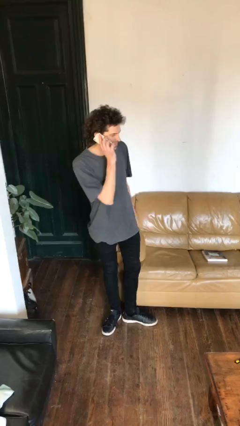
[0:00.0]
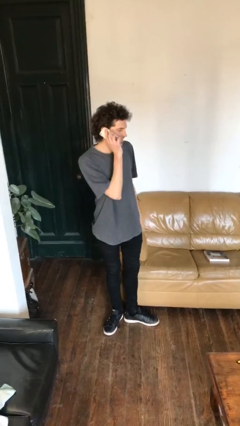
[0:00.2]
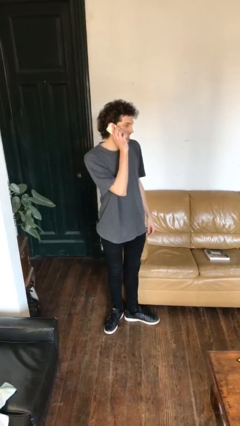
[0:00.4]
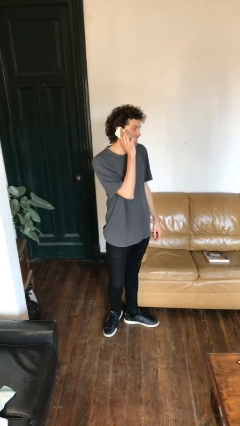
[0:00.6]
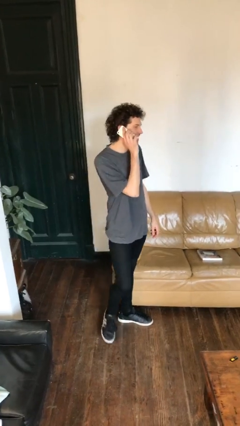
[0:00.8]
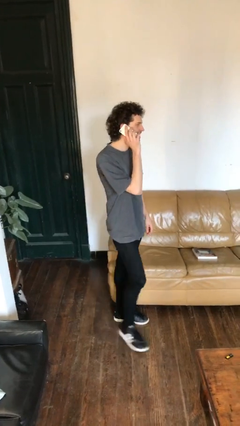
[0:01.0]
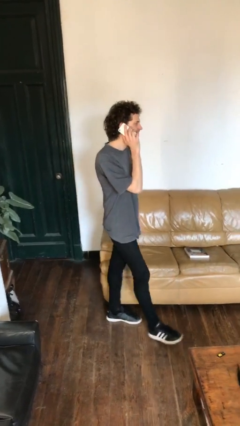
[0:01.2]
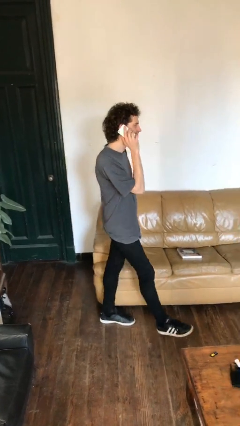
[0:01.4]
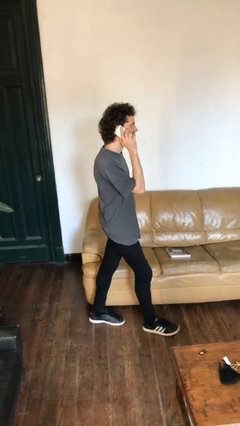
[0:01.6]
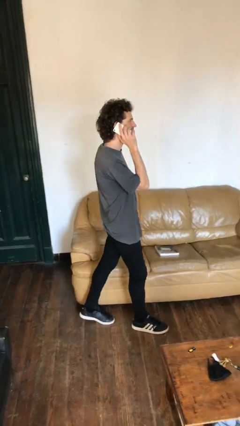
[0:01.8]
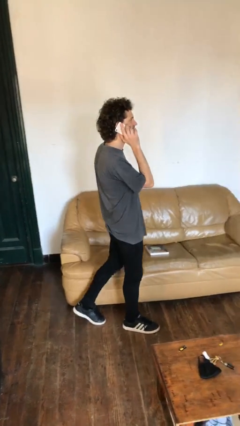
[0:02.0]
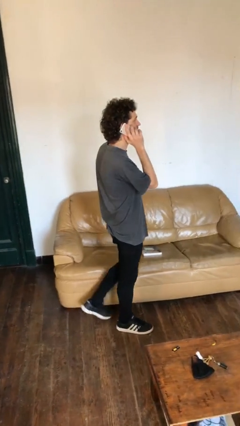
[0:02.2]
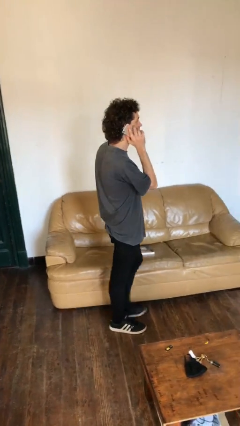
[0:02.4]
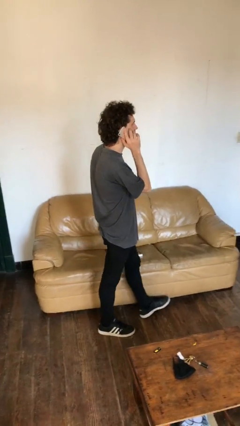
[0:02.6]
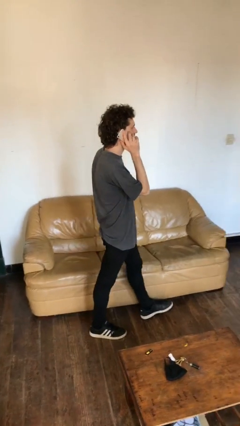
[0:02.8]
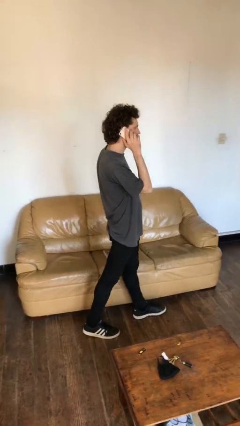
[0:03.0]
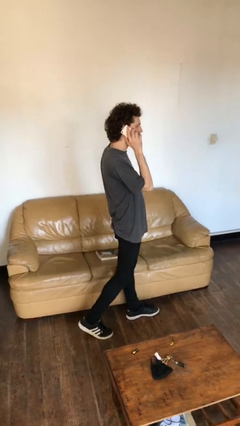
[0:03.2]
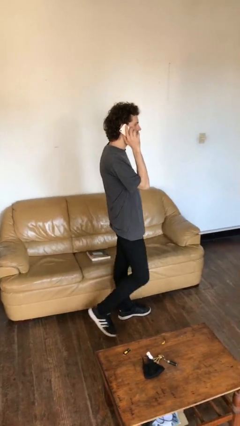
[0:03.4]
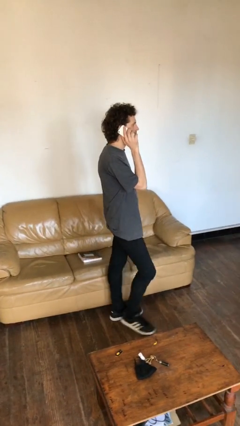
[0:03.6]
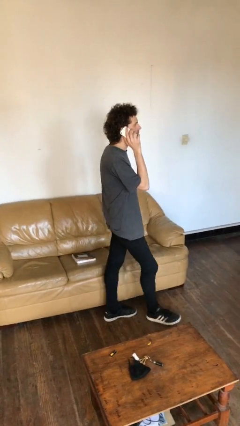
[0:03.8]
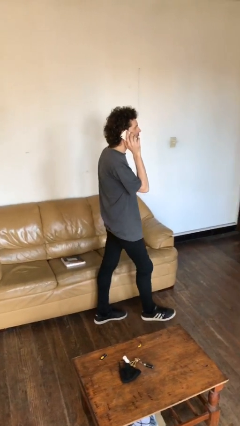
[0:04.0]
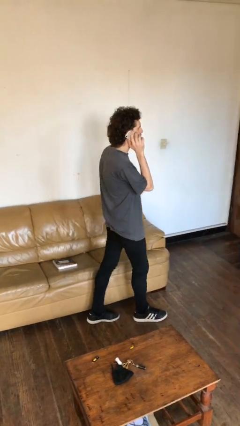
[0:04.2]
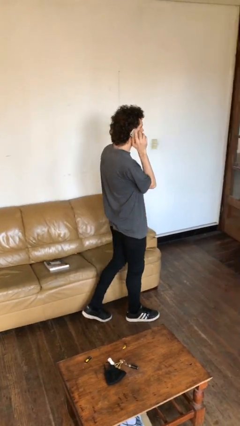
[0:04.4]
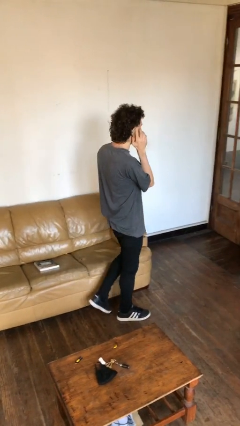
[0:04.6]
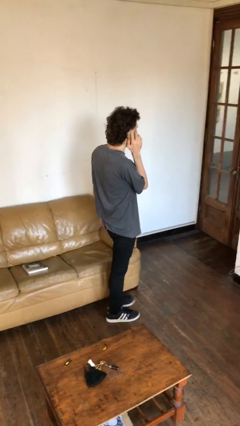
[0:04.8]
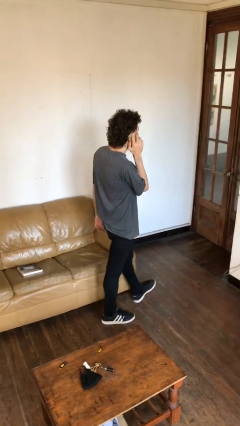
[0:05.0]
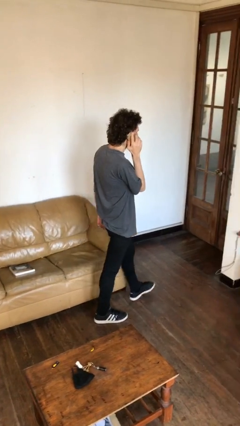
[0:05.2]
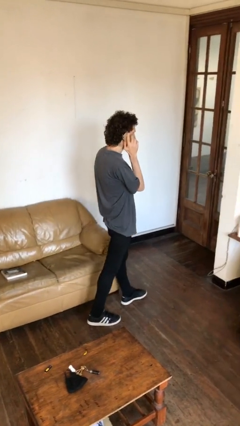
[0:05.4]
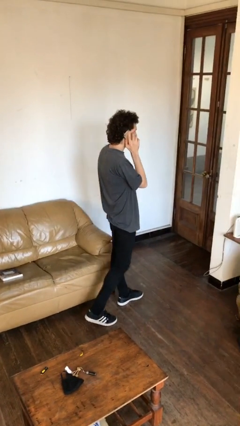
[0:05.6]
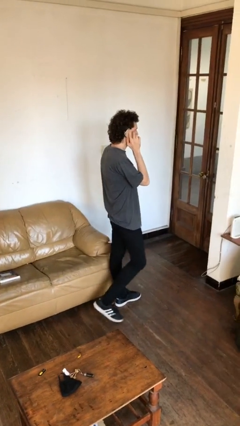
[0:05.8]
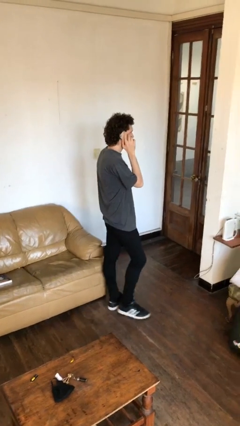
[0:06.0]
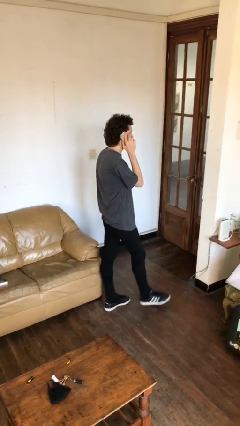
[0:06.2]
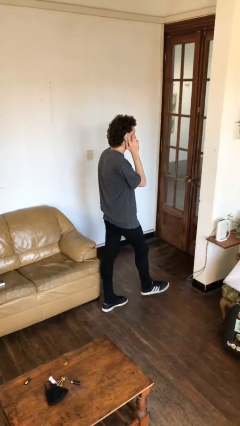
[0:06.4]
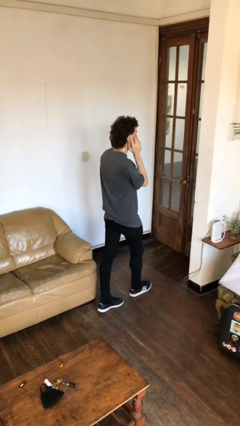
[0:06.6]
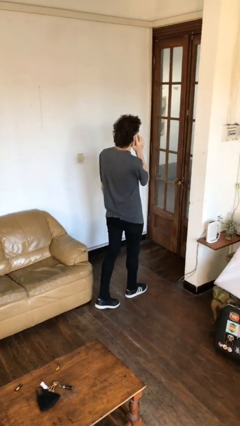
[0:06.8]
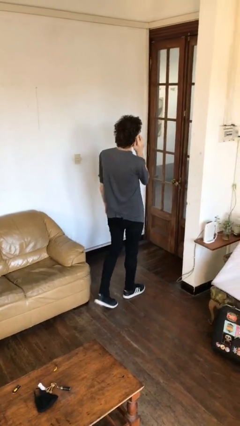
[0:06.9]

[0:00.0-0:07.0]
person talks on phone

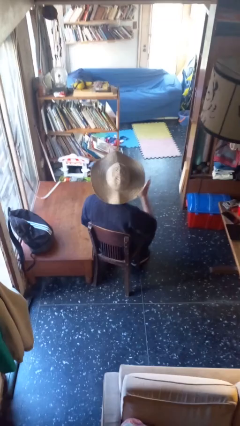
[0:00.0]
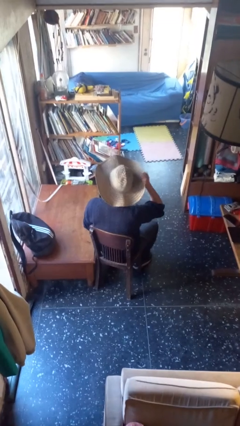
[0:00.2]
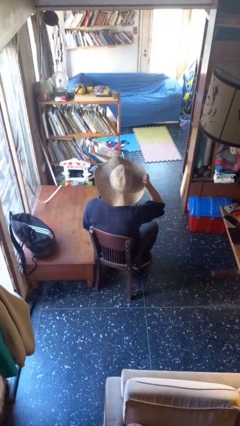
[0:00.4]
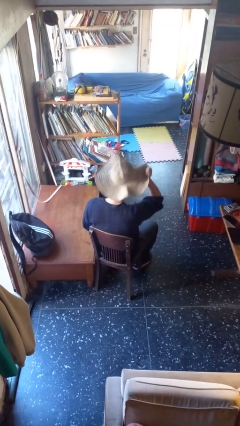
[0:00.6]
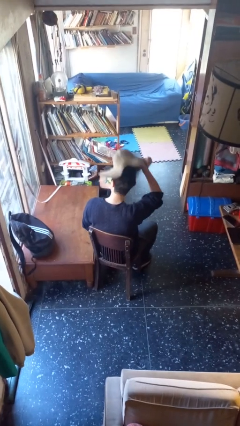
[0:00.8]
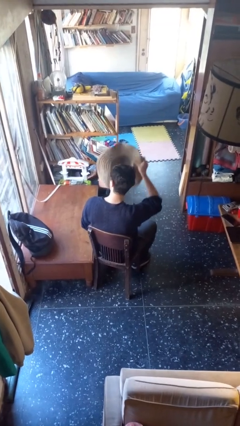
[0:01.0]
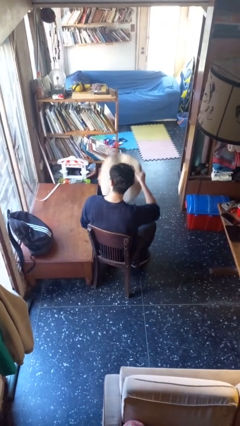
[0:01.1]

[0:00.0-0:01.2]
person takes off hat

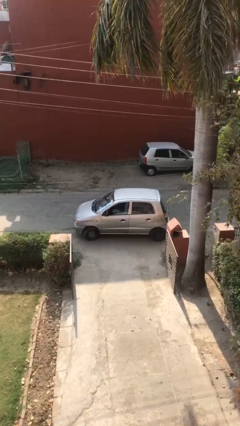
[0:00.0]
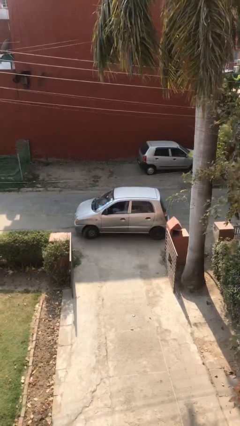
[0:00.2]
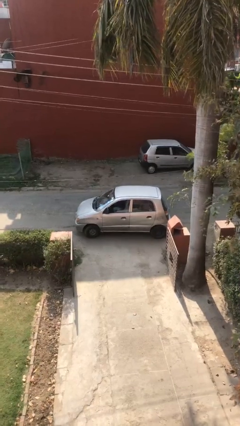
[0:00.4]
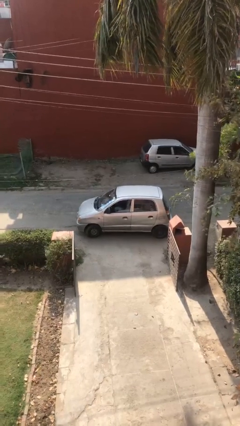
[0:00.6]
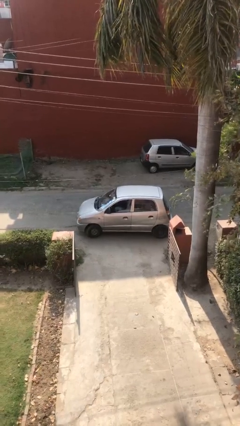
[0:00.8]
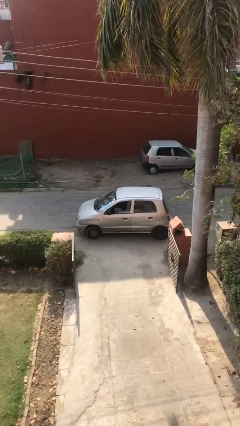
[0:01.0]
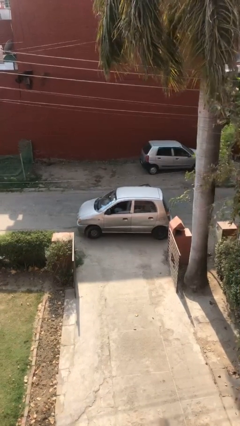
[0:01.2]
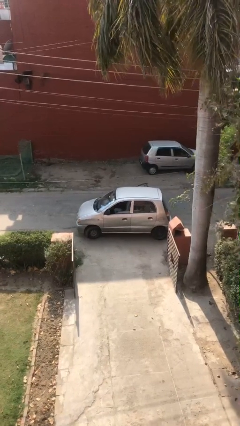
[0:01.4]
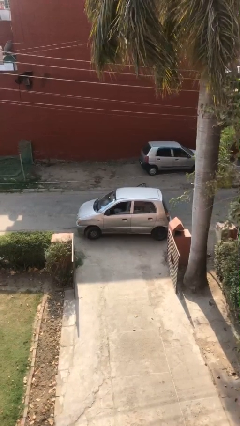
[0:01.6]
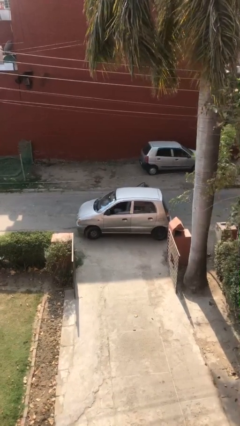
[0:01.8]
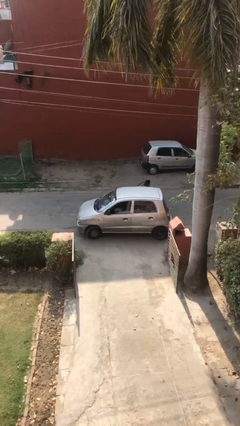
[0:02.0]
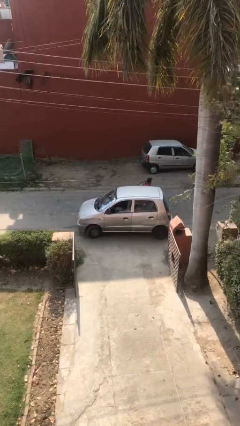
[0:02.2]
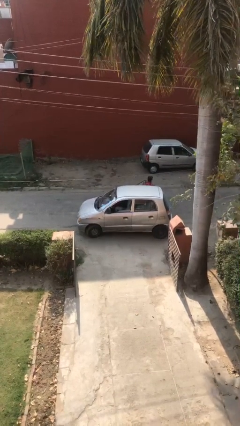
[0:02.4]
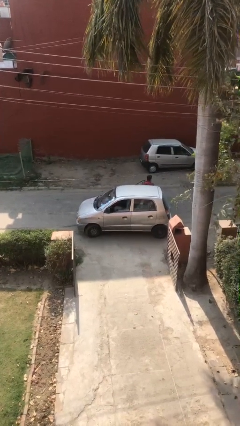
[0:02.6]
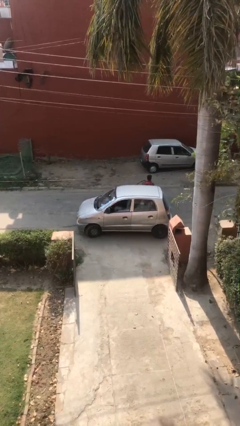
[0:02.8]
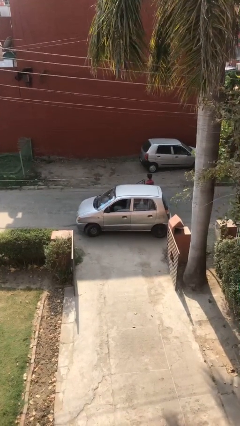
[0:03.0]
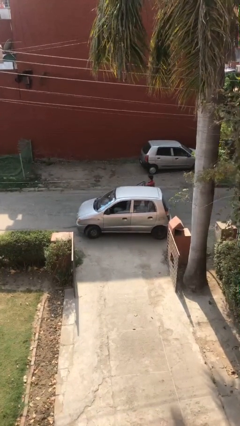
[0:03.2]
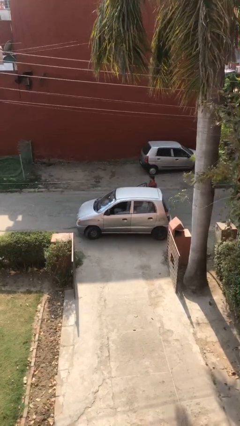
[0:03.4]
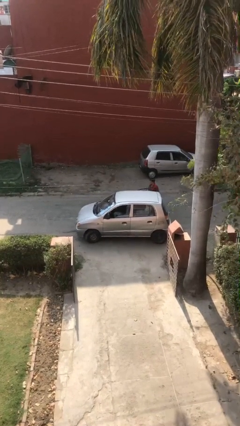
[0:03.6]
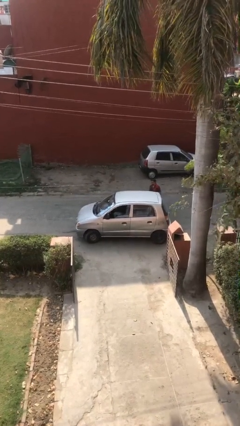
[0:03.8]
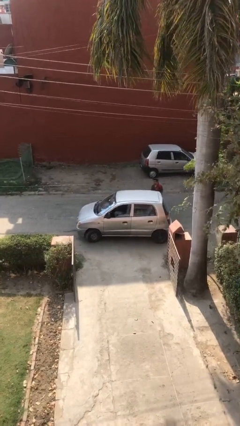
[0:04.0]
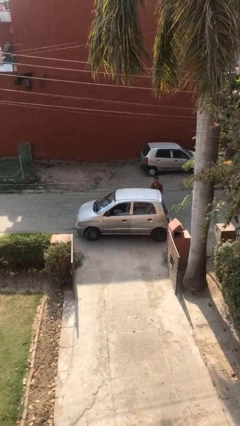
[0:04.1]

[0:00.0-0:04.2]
car drops off person

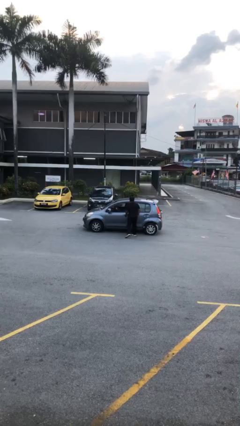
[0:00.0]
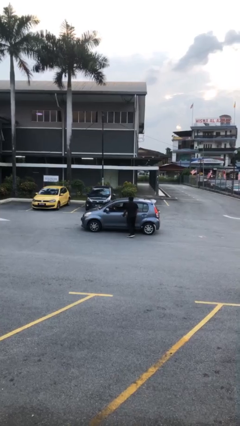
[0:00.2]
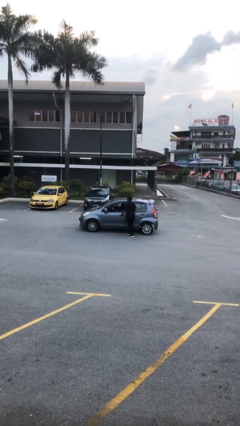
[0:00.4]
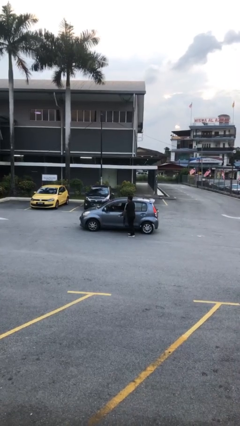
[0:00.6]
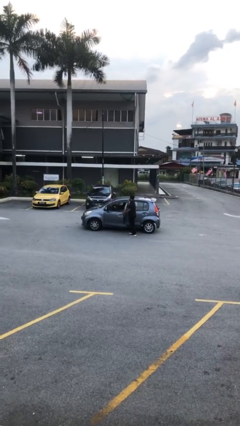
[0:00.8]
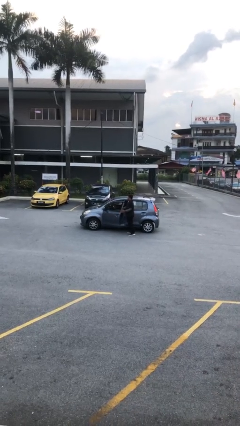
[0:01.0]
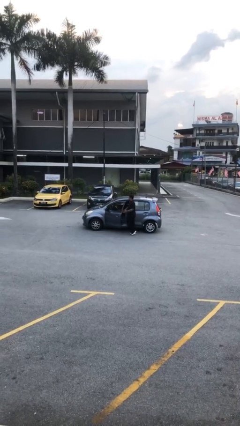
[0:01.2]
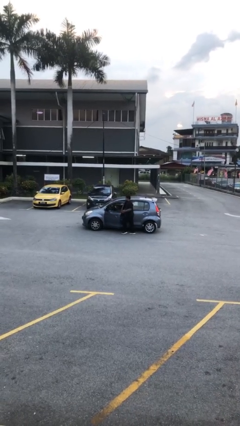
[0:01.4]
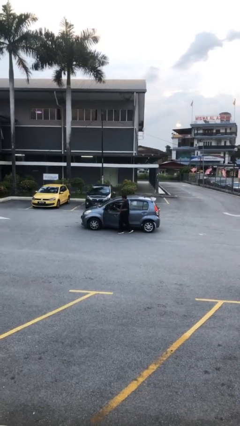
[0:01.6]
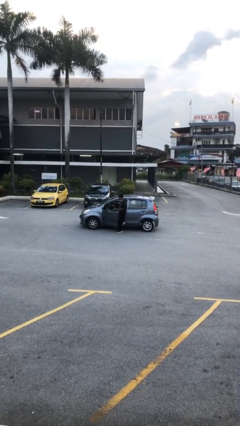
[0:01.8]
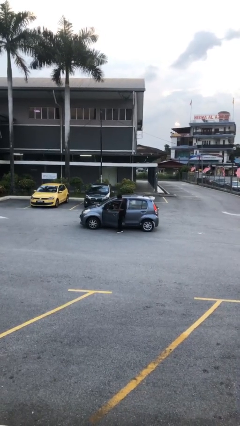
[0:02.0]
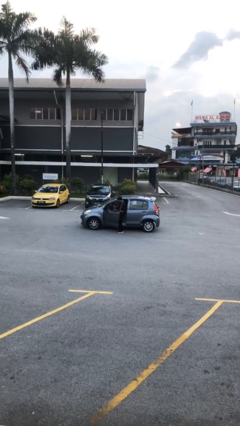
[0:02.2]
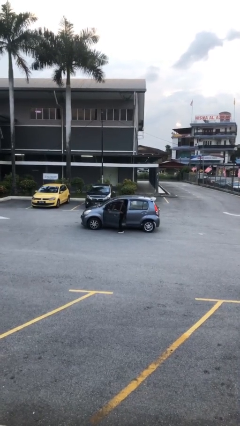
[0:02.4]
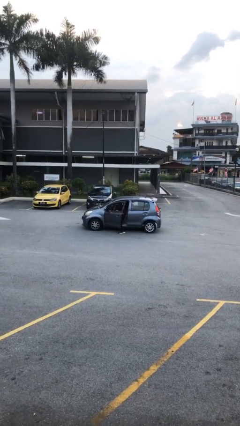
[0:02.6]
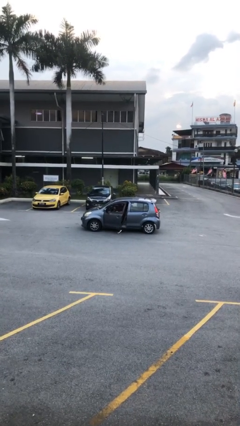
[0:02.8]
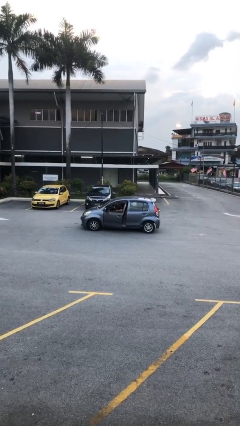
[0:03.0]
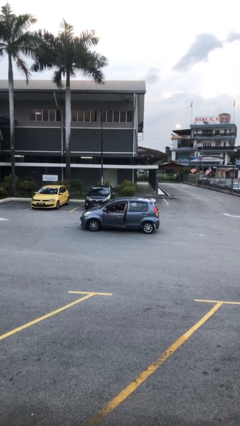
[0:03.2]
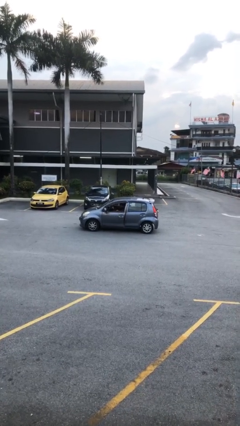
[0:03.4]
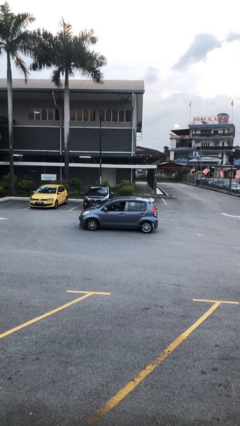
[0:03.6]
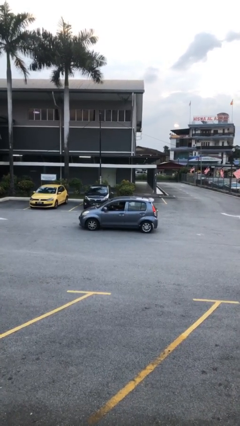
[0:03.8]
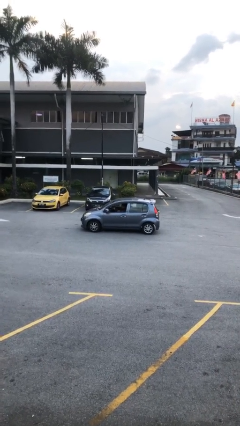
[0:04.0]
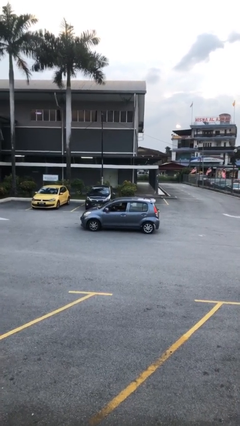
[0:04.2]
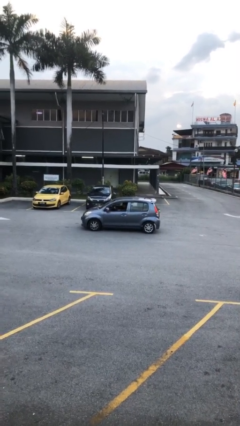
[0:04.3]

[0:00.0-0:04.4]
car picks up person

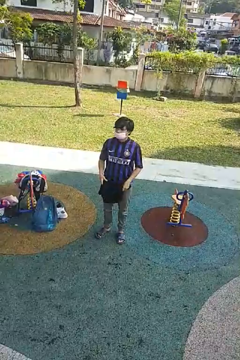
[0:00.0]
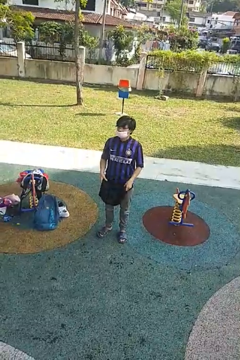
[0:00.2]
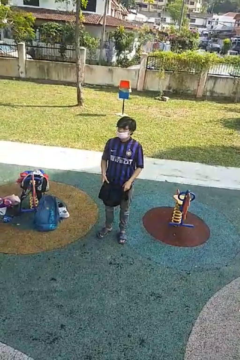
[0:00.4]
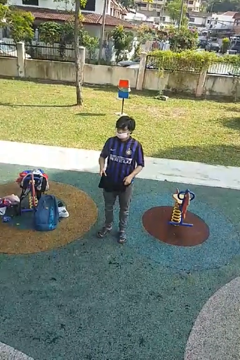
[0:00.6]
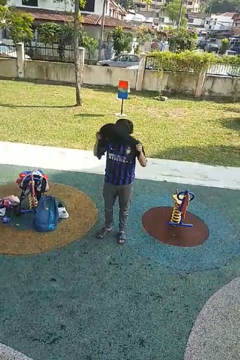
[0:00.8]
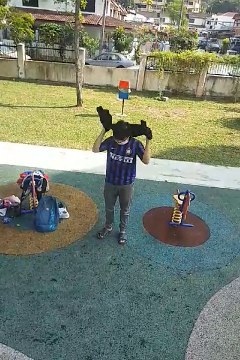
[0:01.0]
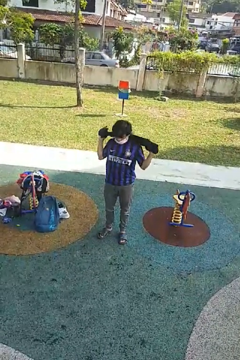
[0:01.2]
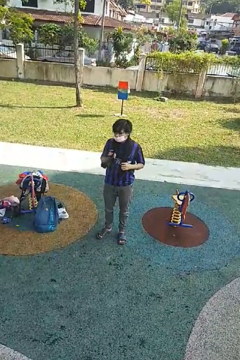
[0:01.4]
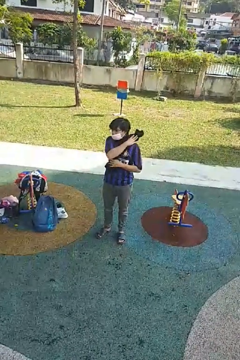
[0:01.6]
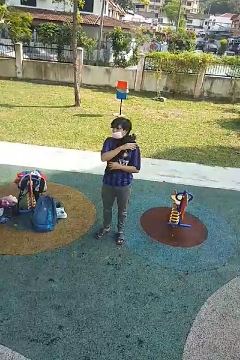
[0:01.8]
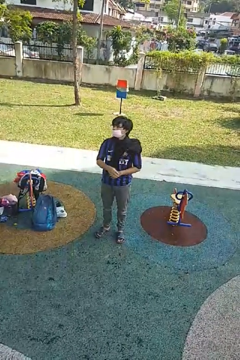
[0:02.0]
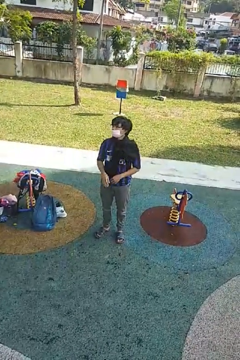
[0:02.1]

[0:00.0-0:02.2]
person puts on scarf
